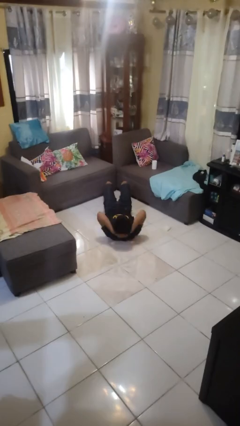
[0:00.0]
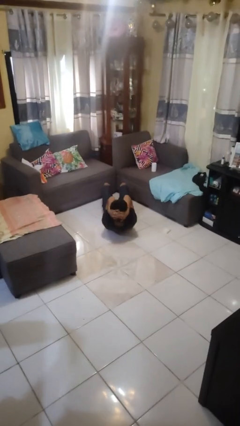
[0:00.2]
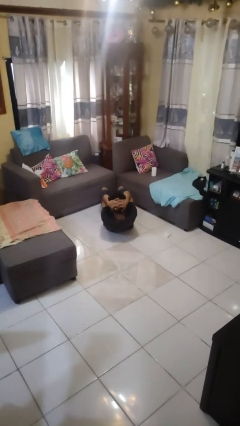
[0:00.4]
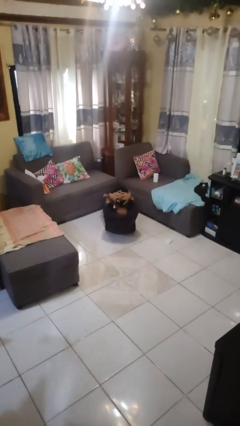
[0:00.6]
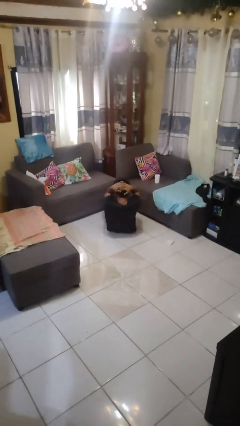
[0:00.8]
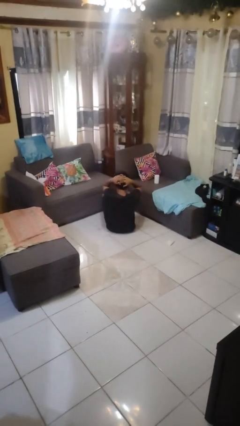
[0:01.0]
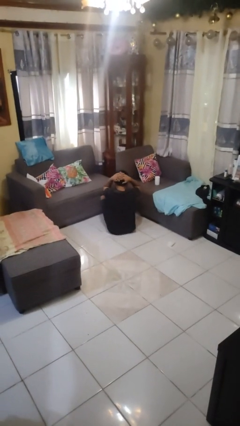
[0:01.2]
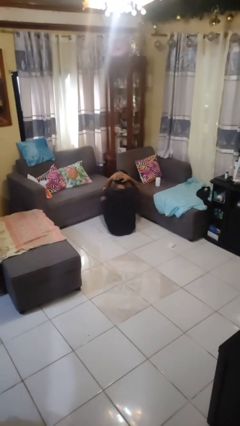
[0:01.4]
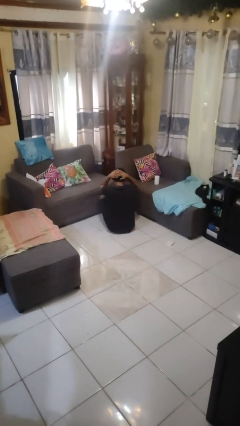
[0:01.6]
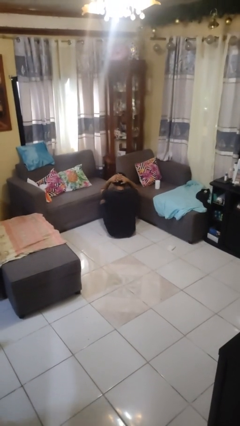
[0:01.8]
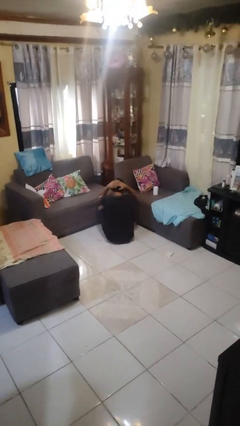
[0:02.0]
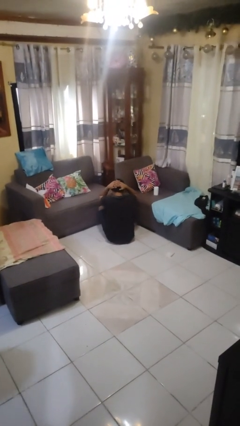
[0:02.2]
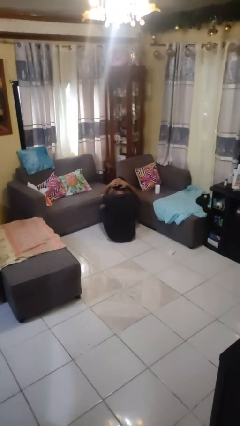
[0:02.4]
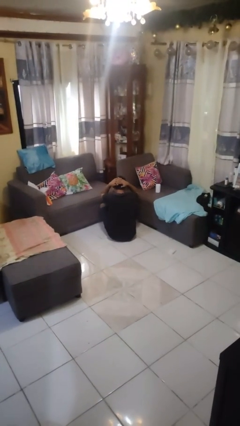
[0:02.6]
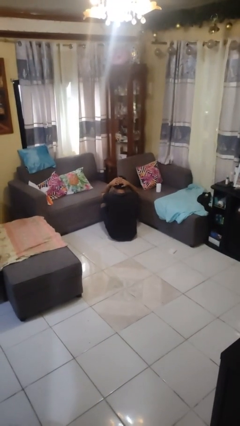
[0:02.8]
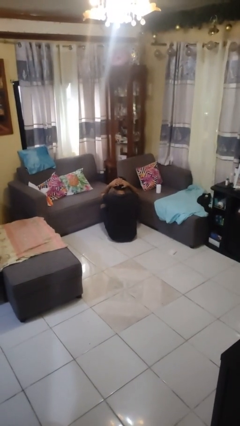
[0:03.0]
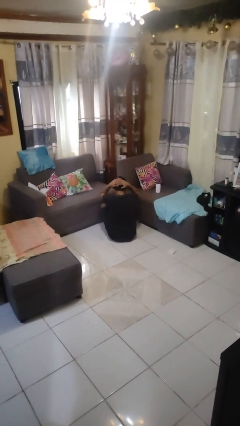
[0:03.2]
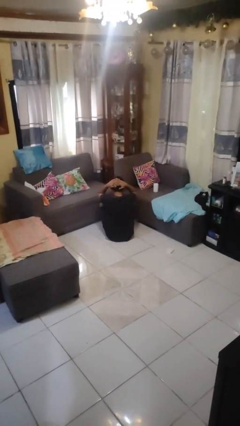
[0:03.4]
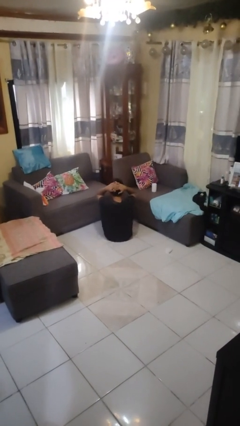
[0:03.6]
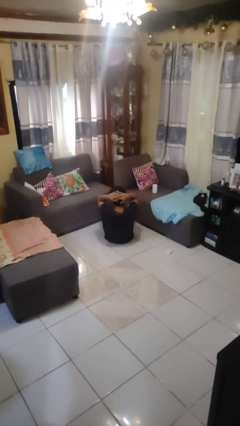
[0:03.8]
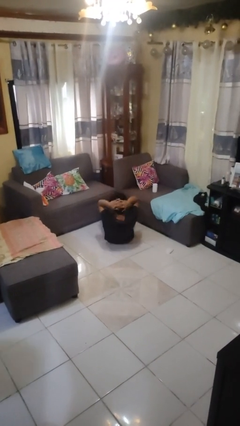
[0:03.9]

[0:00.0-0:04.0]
person exercises with situp

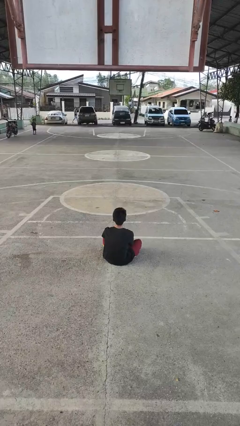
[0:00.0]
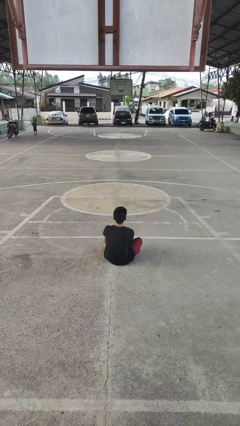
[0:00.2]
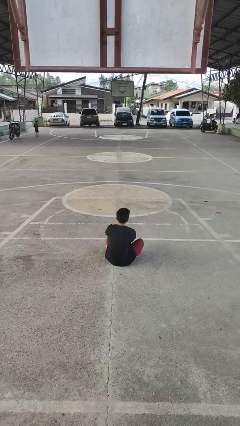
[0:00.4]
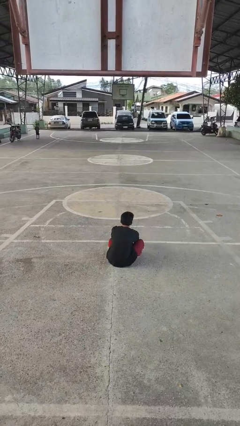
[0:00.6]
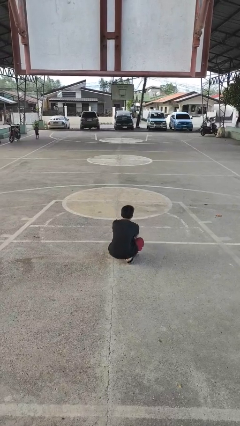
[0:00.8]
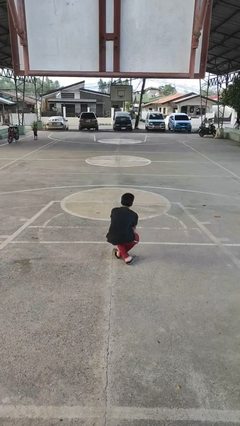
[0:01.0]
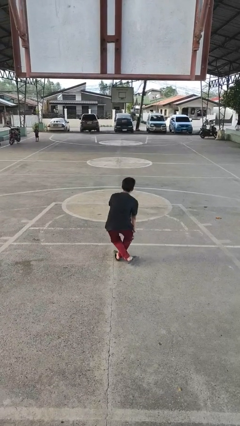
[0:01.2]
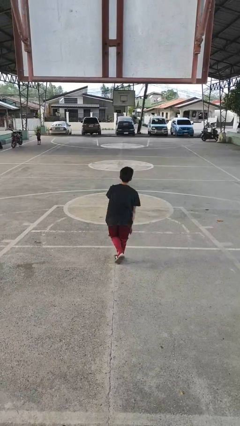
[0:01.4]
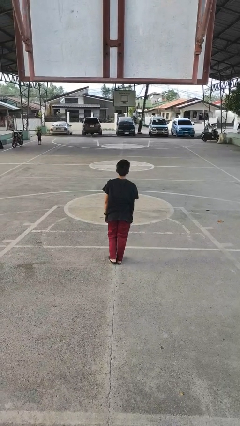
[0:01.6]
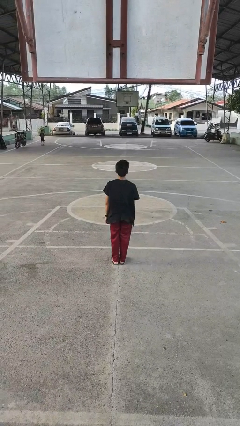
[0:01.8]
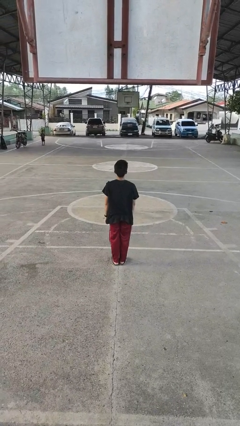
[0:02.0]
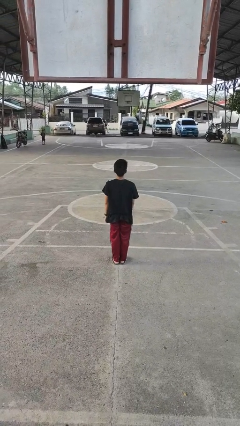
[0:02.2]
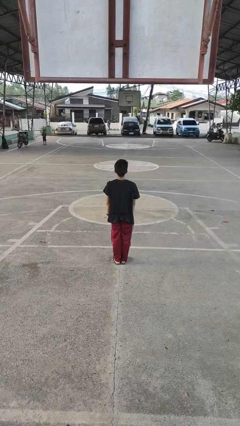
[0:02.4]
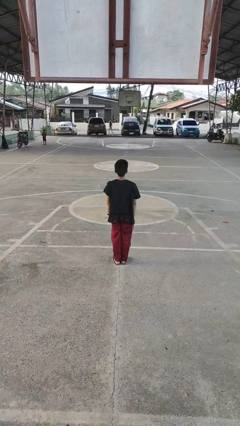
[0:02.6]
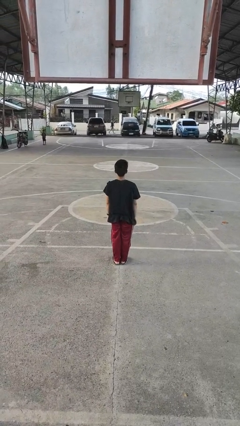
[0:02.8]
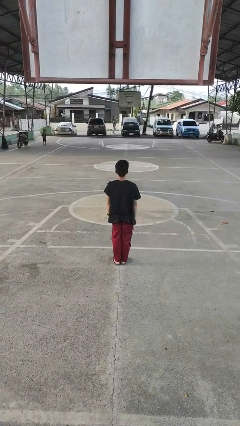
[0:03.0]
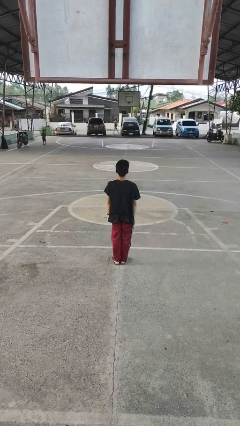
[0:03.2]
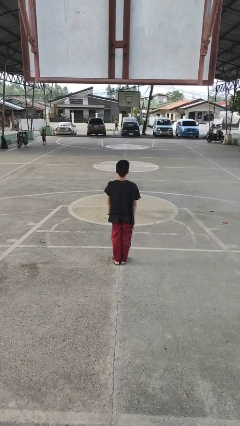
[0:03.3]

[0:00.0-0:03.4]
person stands up from floor

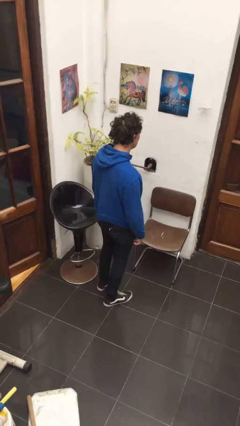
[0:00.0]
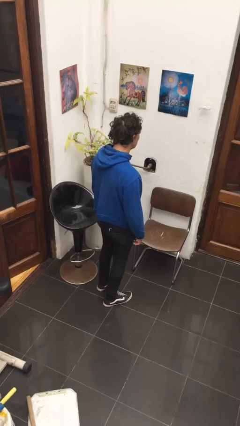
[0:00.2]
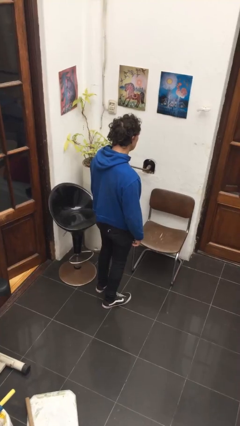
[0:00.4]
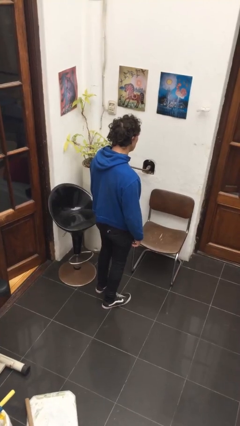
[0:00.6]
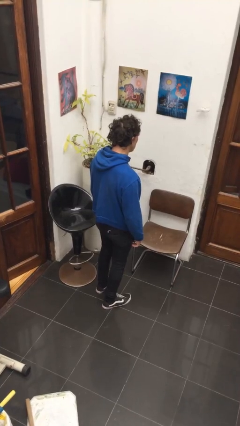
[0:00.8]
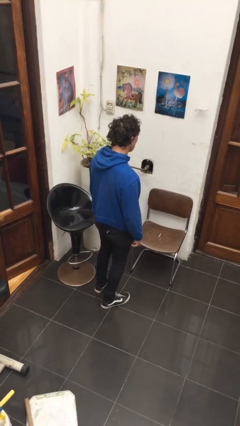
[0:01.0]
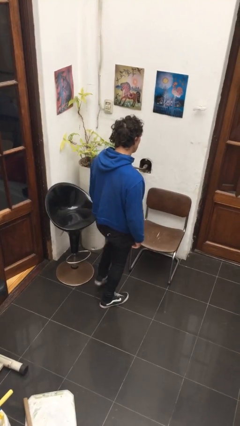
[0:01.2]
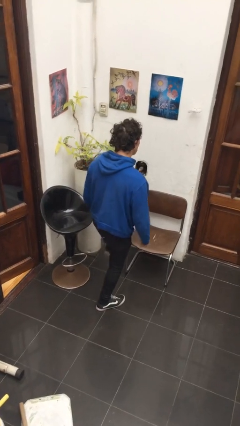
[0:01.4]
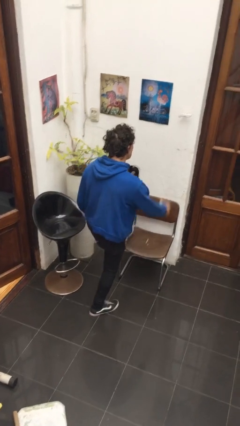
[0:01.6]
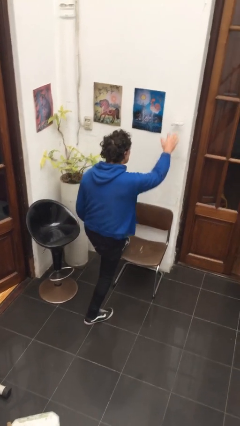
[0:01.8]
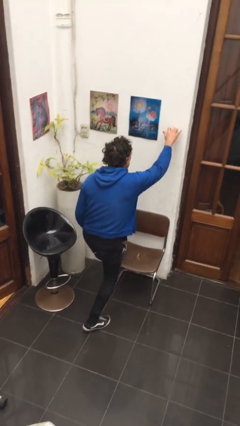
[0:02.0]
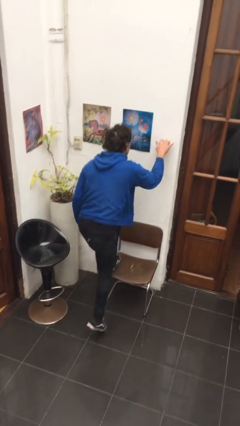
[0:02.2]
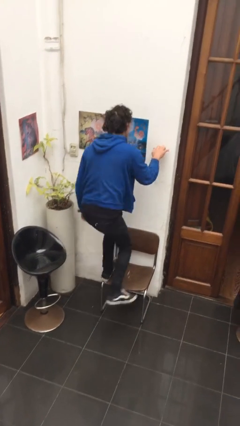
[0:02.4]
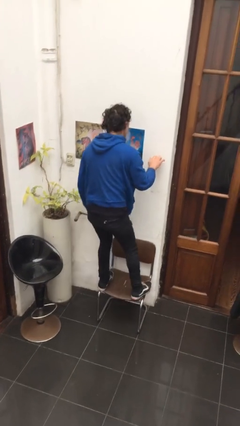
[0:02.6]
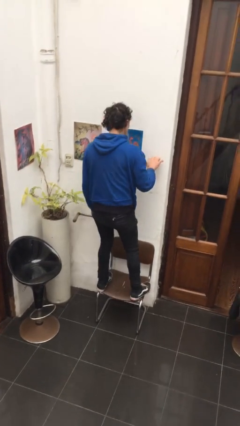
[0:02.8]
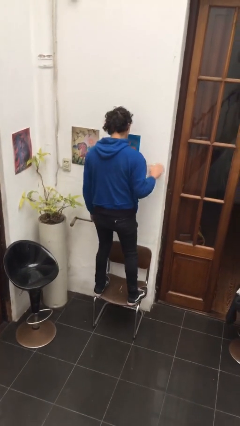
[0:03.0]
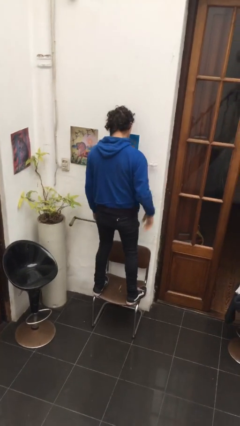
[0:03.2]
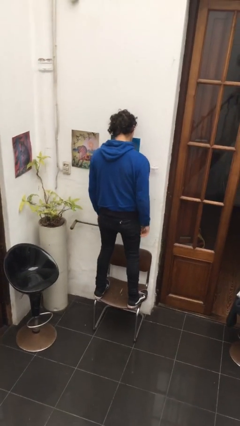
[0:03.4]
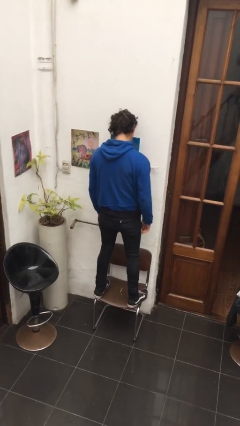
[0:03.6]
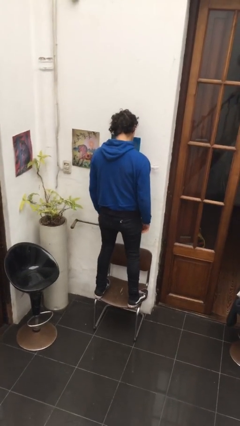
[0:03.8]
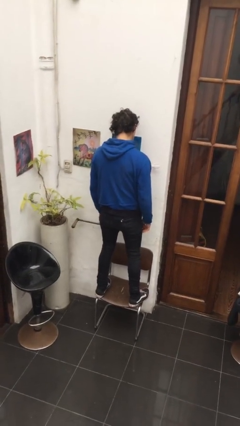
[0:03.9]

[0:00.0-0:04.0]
person climbs on chair

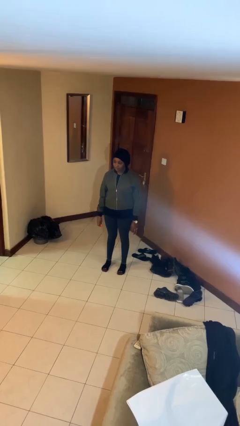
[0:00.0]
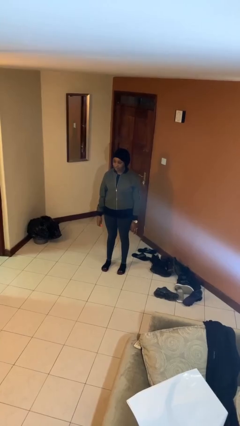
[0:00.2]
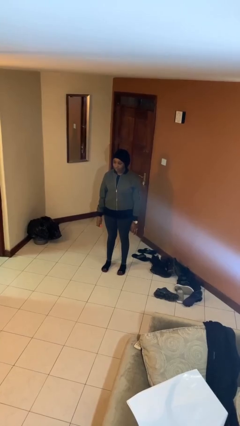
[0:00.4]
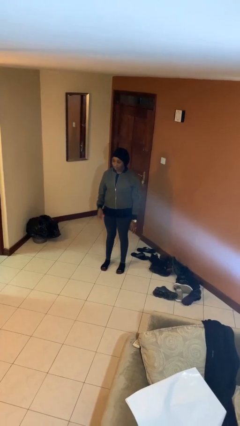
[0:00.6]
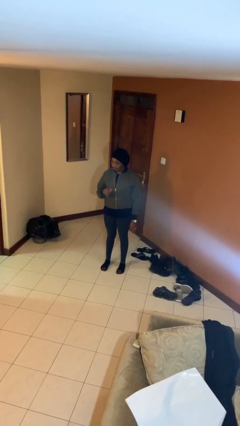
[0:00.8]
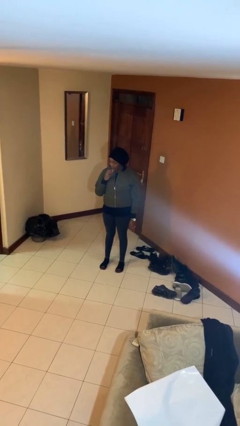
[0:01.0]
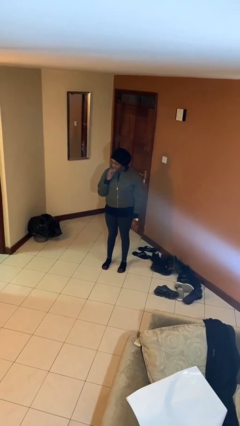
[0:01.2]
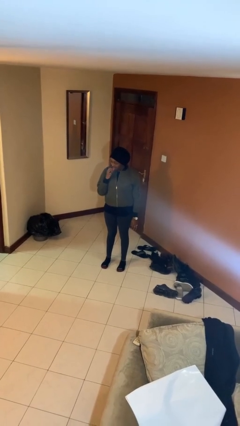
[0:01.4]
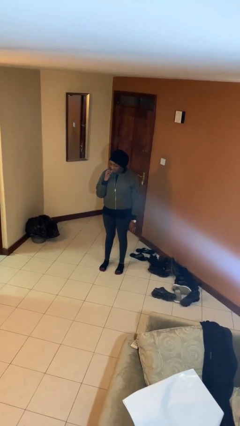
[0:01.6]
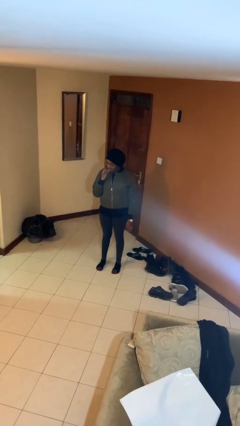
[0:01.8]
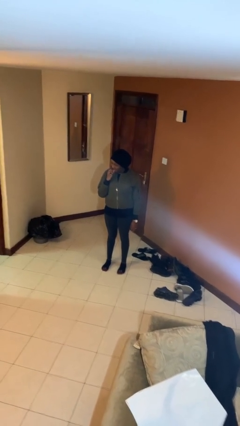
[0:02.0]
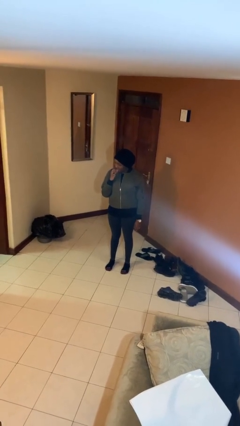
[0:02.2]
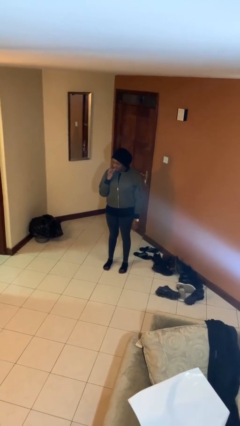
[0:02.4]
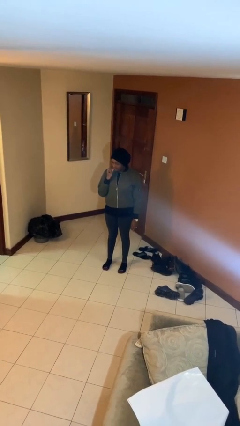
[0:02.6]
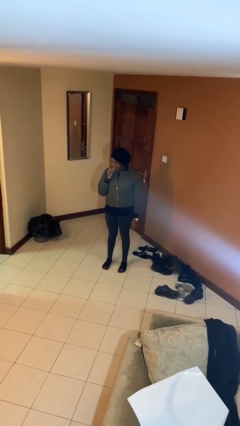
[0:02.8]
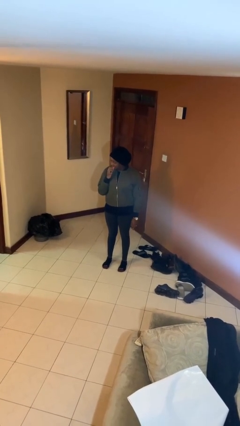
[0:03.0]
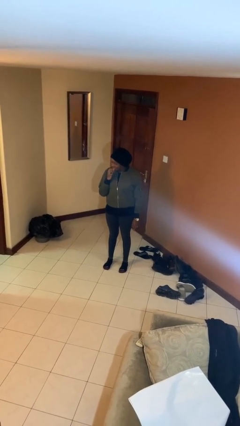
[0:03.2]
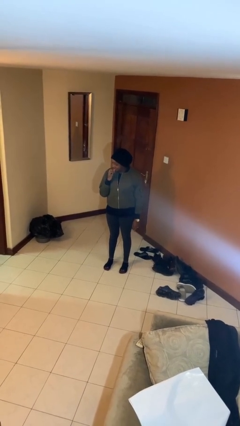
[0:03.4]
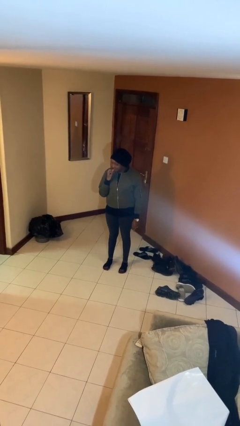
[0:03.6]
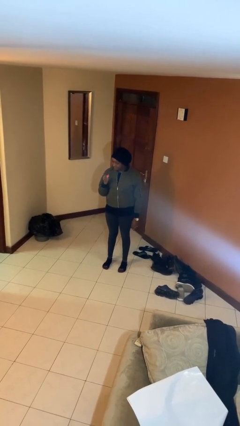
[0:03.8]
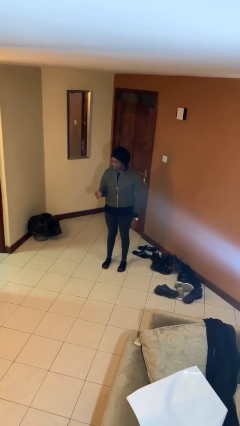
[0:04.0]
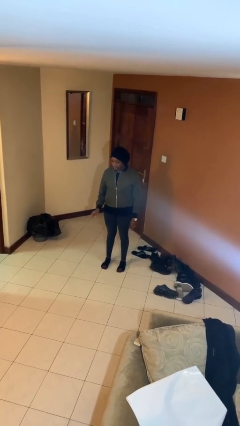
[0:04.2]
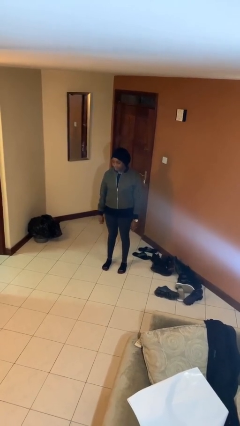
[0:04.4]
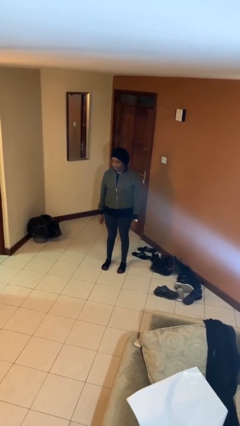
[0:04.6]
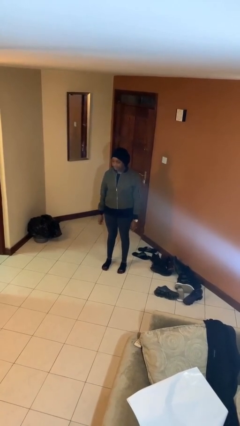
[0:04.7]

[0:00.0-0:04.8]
person applies lip makeup

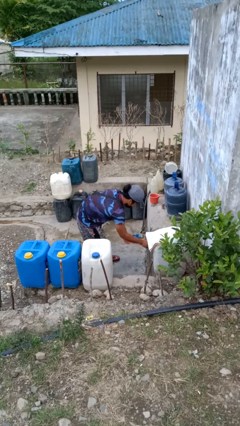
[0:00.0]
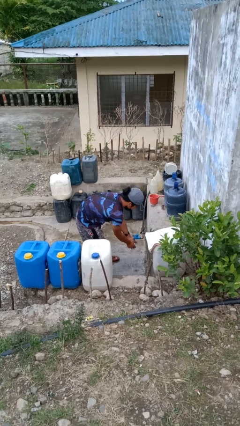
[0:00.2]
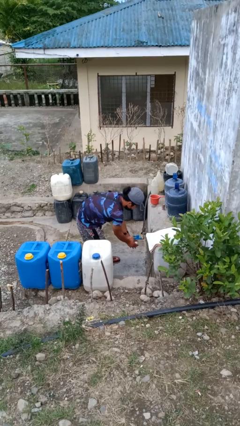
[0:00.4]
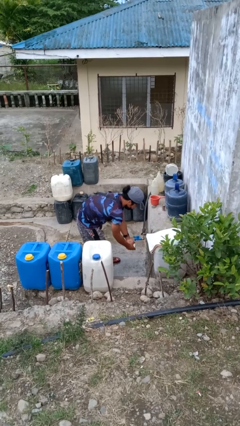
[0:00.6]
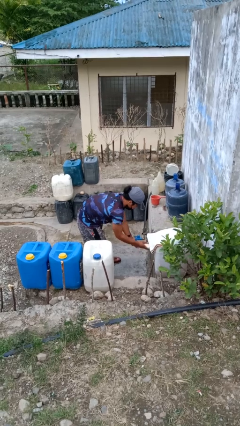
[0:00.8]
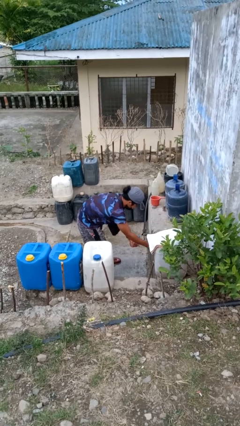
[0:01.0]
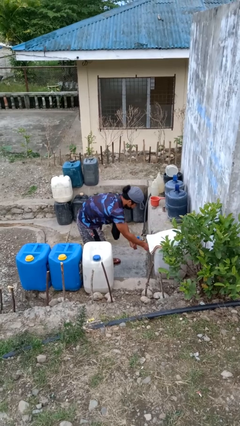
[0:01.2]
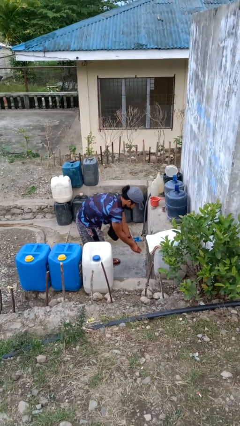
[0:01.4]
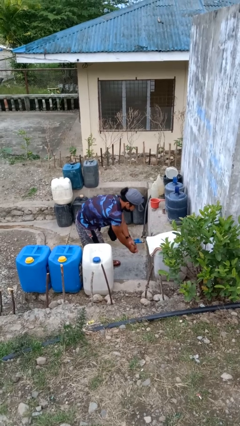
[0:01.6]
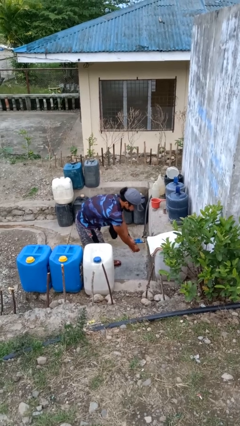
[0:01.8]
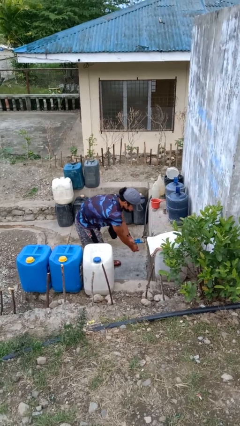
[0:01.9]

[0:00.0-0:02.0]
person washes hands
